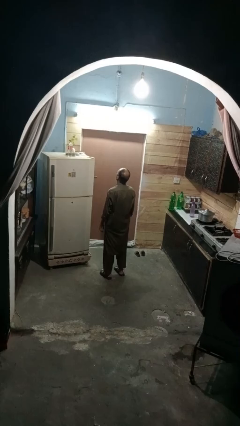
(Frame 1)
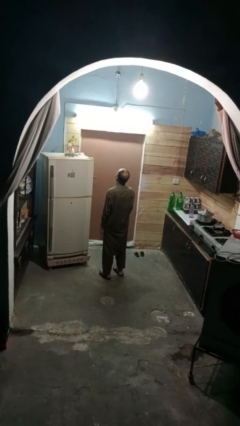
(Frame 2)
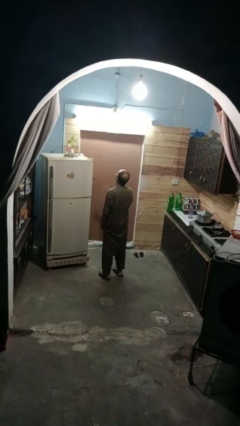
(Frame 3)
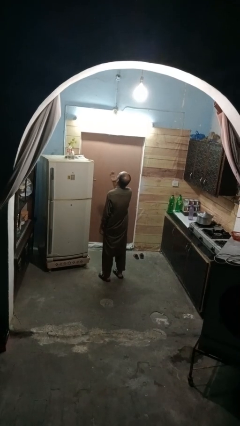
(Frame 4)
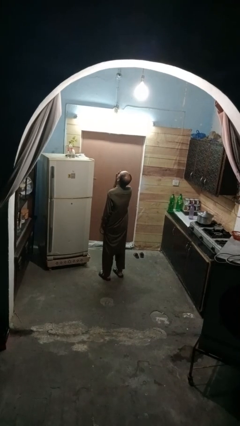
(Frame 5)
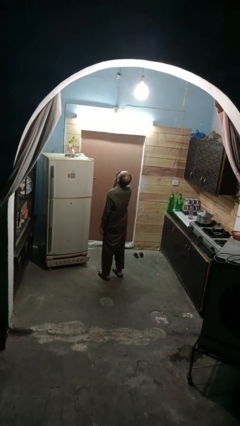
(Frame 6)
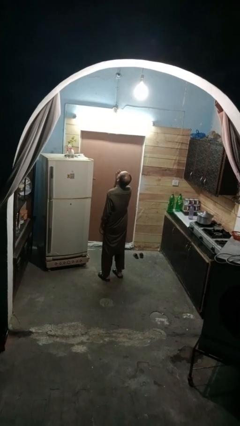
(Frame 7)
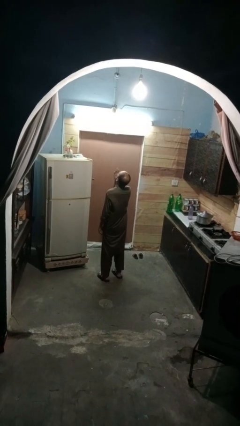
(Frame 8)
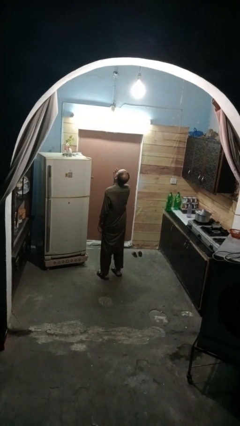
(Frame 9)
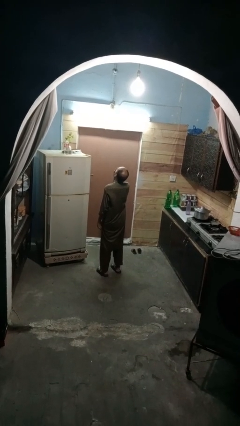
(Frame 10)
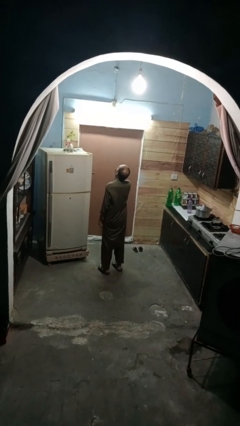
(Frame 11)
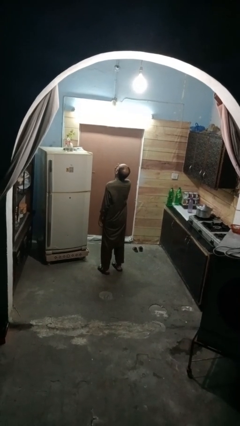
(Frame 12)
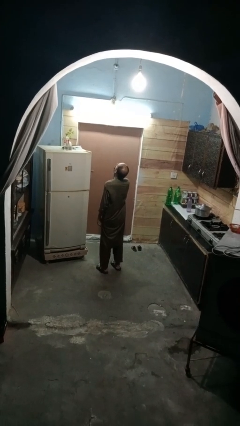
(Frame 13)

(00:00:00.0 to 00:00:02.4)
person yawns

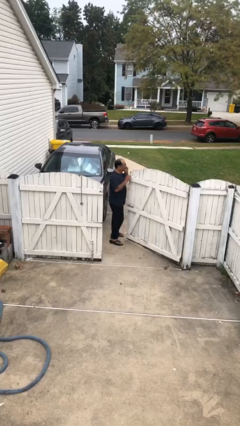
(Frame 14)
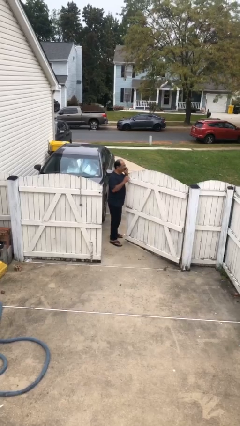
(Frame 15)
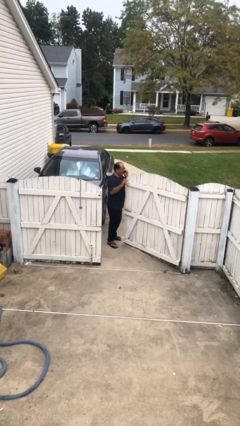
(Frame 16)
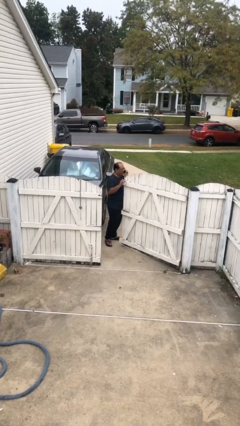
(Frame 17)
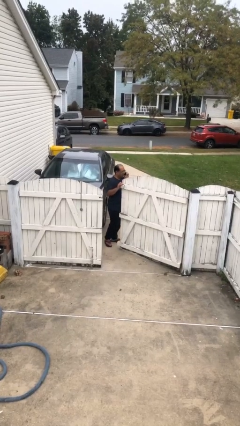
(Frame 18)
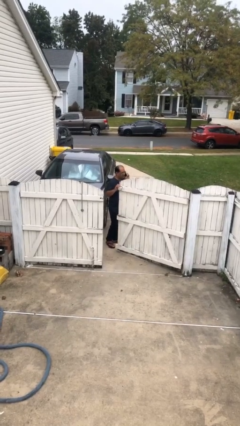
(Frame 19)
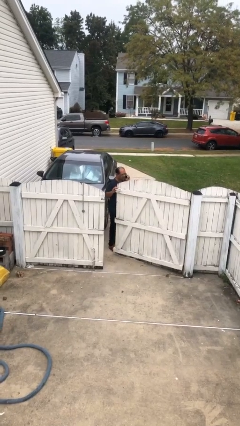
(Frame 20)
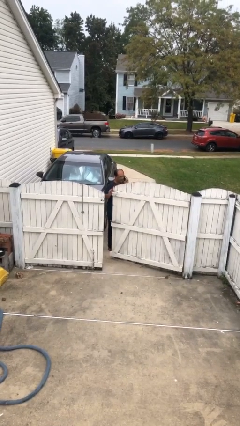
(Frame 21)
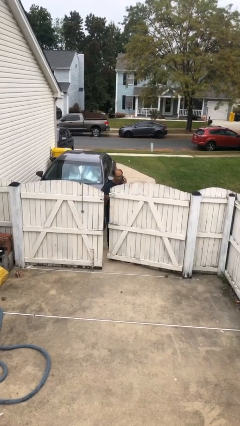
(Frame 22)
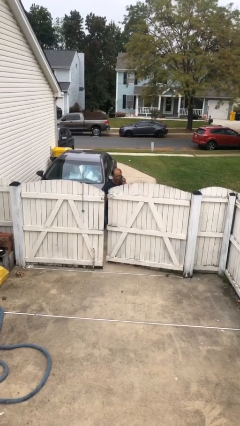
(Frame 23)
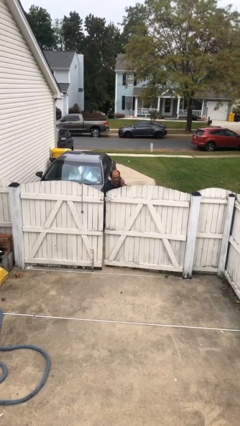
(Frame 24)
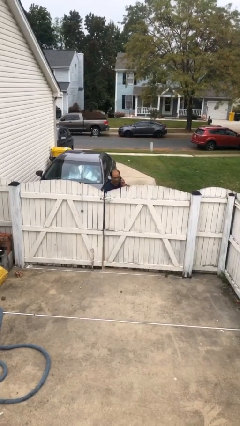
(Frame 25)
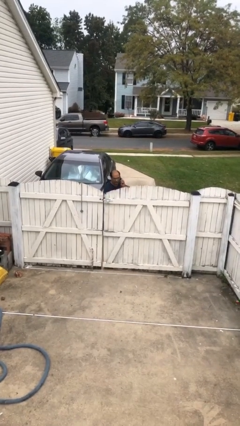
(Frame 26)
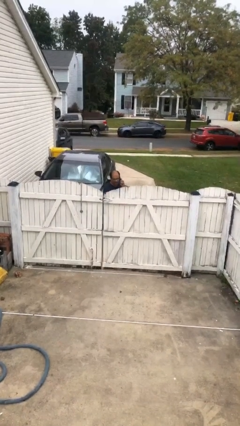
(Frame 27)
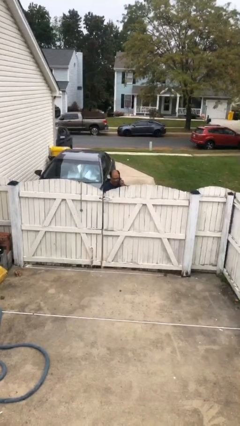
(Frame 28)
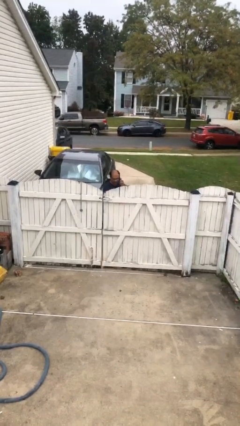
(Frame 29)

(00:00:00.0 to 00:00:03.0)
person closes facility door

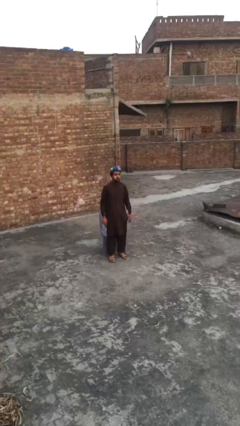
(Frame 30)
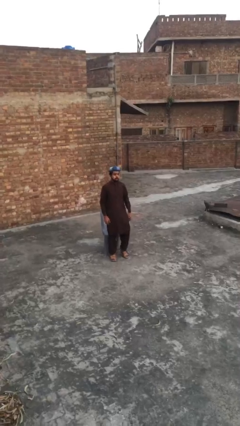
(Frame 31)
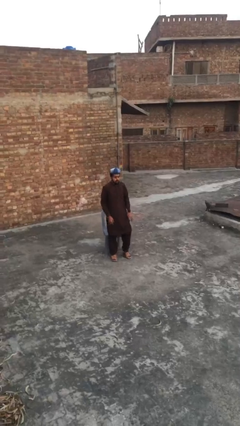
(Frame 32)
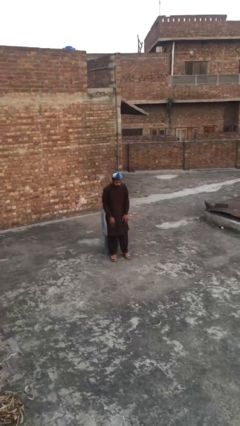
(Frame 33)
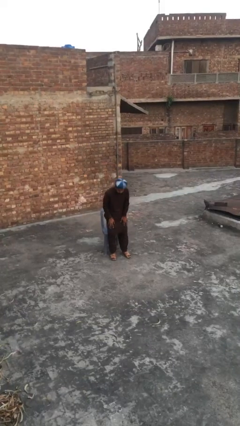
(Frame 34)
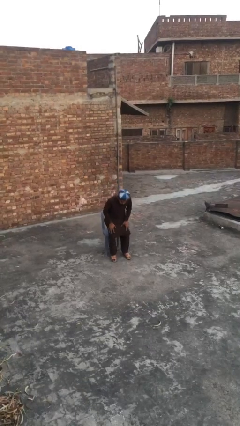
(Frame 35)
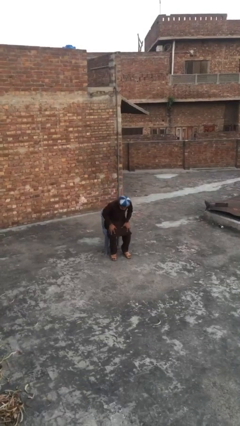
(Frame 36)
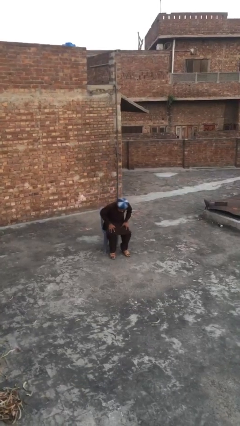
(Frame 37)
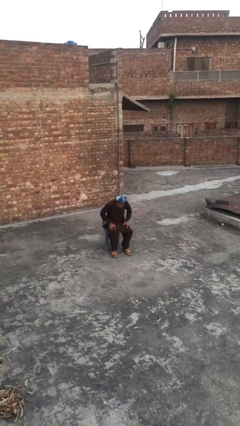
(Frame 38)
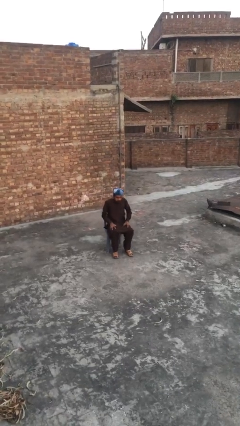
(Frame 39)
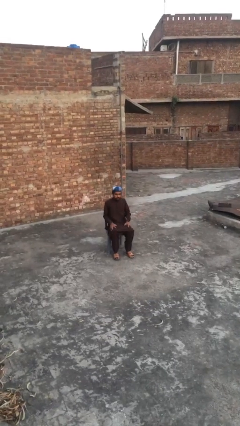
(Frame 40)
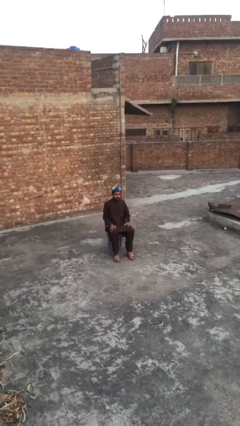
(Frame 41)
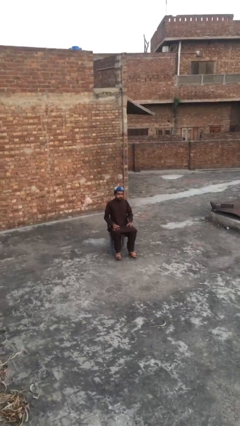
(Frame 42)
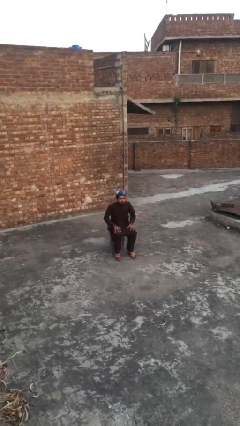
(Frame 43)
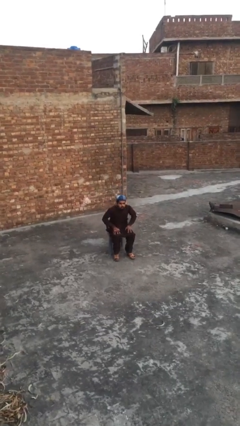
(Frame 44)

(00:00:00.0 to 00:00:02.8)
person sits down

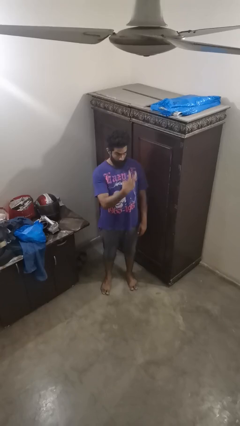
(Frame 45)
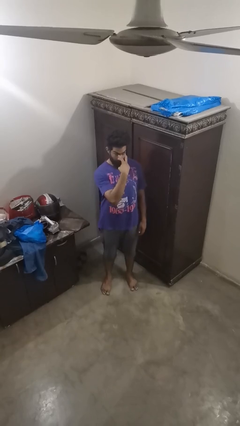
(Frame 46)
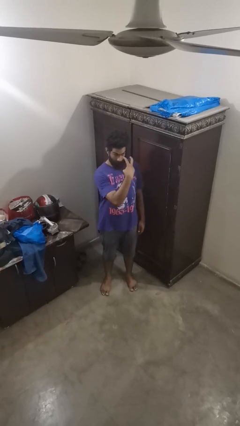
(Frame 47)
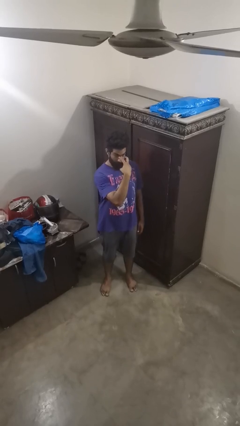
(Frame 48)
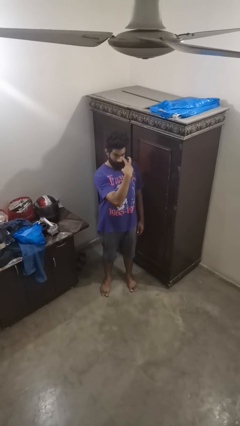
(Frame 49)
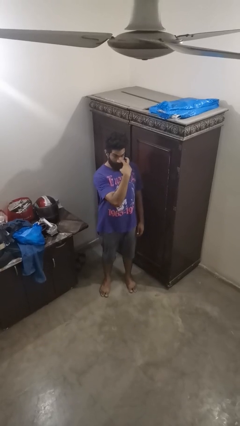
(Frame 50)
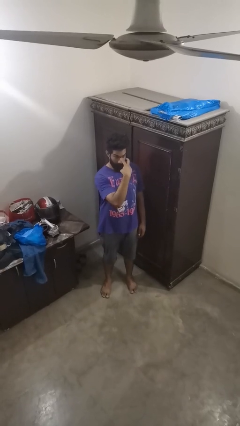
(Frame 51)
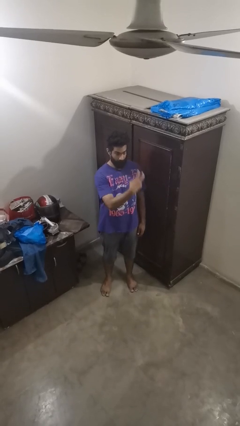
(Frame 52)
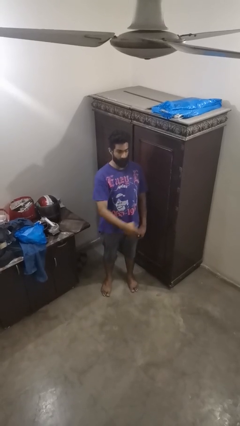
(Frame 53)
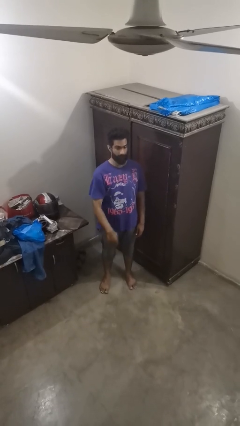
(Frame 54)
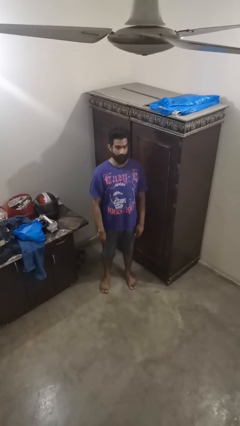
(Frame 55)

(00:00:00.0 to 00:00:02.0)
person gestures watch closely

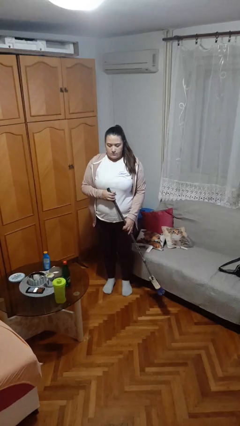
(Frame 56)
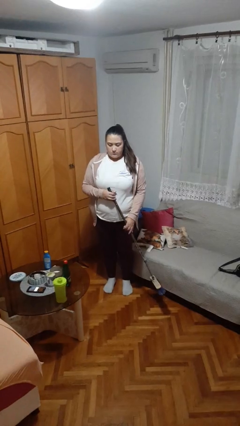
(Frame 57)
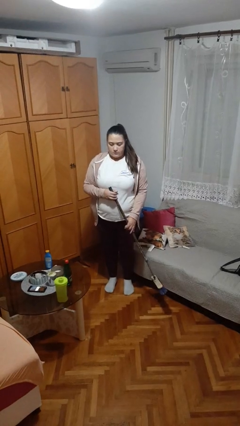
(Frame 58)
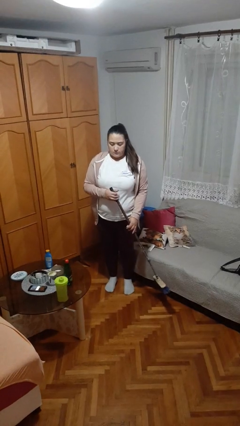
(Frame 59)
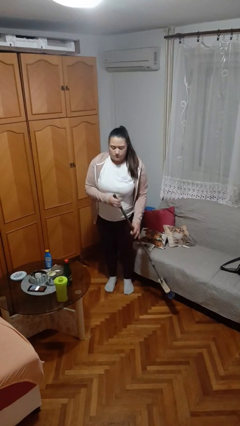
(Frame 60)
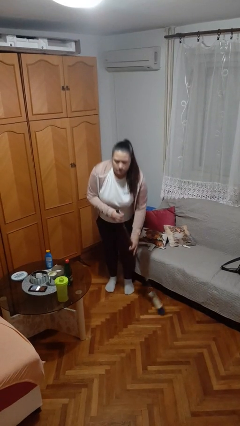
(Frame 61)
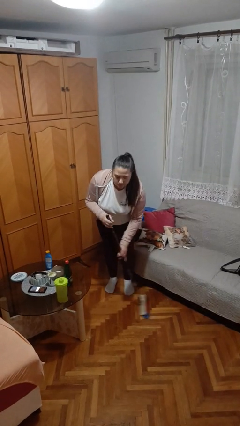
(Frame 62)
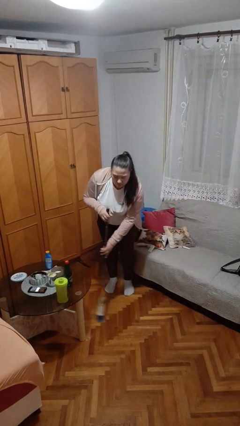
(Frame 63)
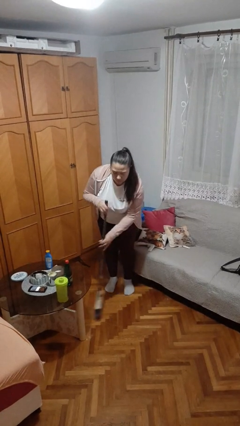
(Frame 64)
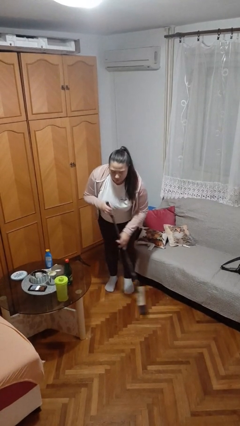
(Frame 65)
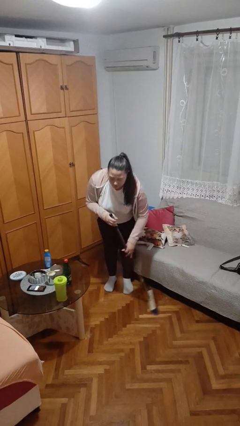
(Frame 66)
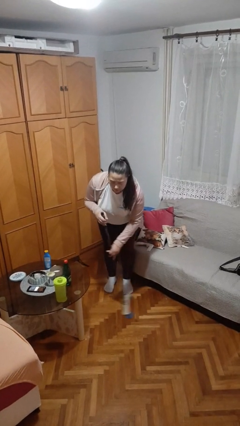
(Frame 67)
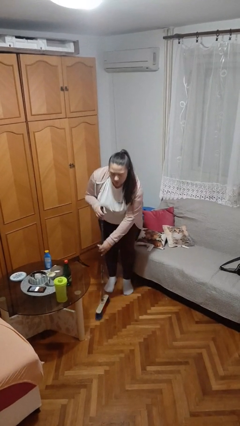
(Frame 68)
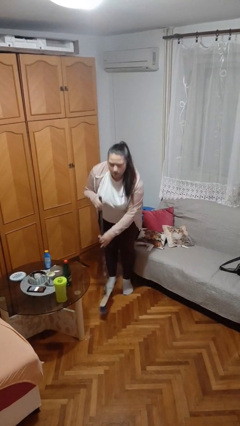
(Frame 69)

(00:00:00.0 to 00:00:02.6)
person sweeps floor

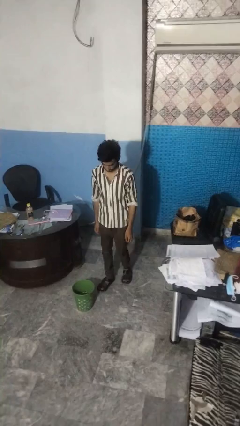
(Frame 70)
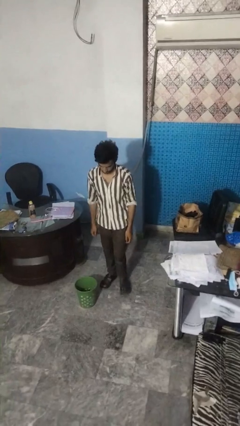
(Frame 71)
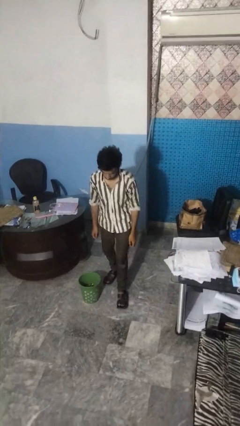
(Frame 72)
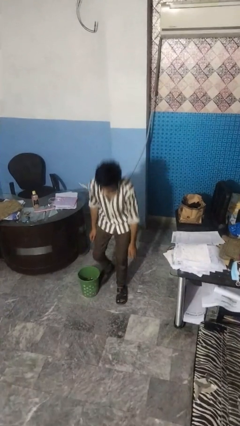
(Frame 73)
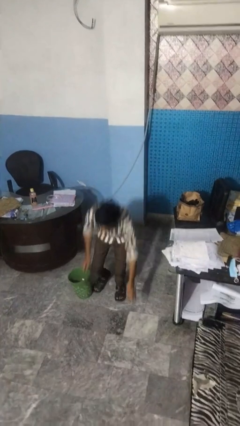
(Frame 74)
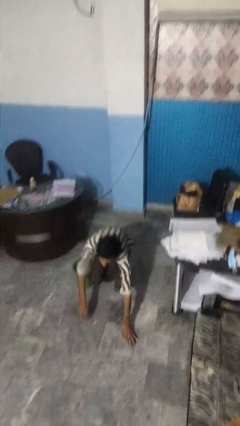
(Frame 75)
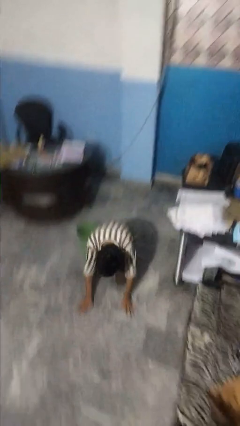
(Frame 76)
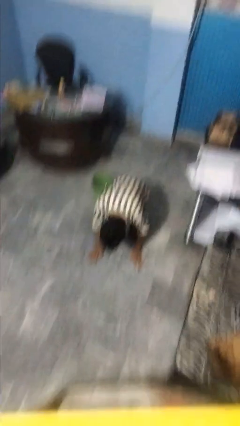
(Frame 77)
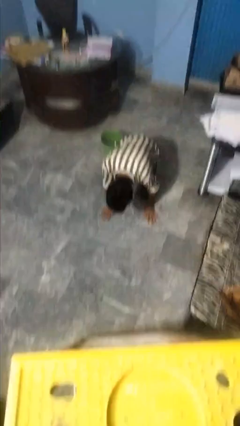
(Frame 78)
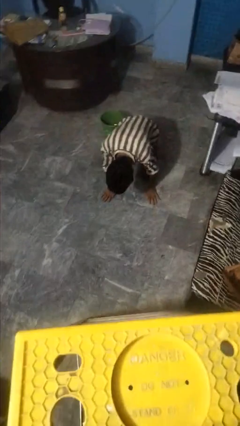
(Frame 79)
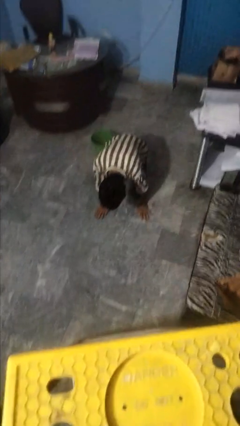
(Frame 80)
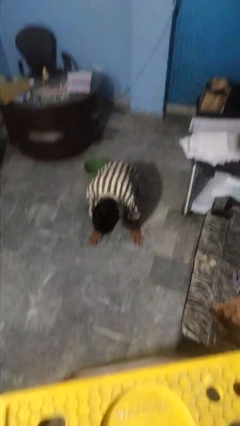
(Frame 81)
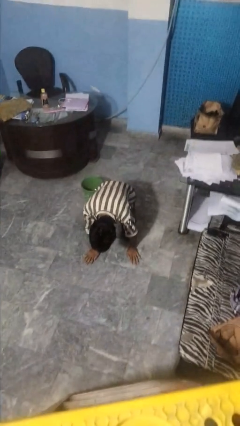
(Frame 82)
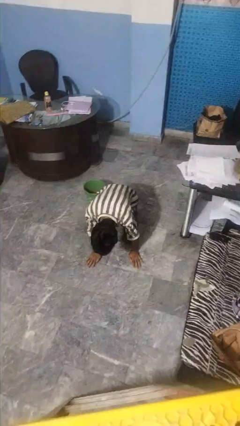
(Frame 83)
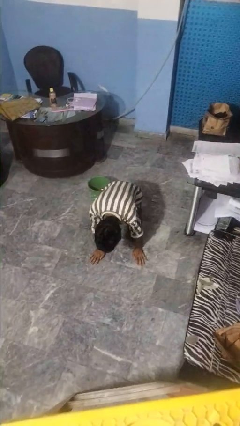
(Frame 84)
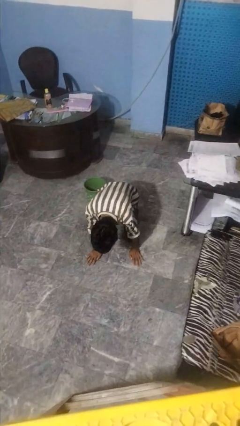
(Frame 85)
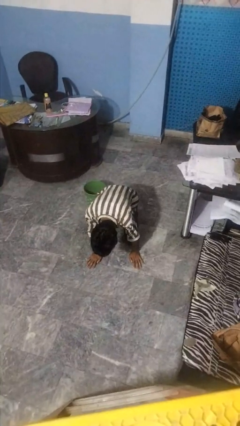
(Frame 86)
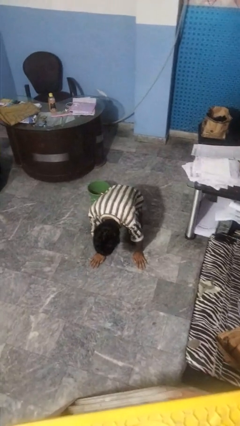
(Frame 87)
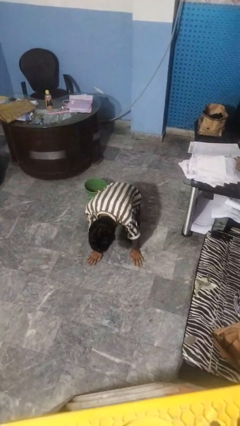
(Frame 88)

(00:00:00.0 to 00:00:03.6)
person trips on object on floor

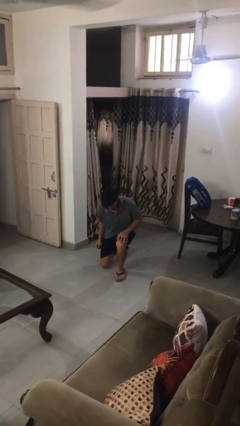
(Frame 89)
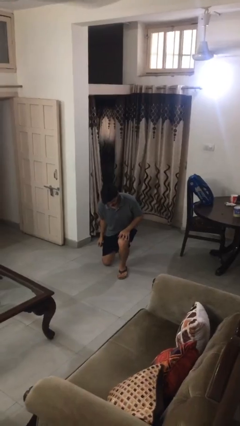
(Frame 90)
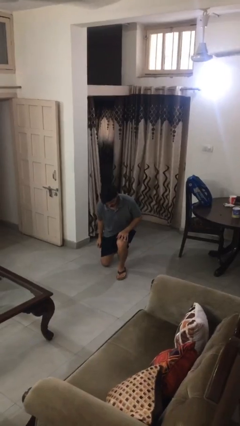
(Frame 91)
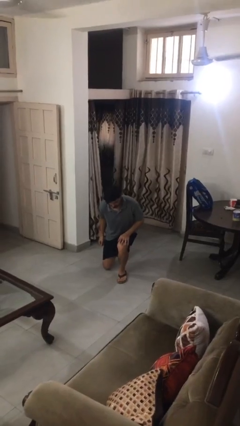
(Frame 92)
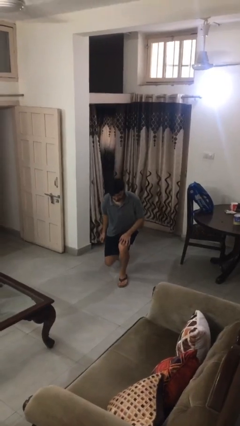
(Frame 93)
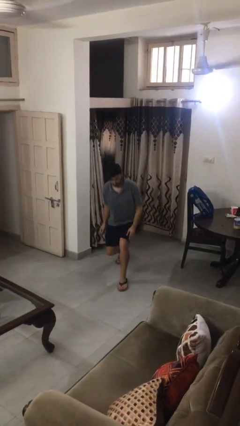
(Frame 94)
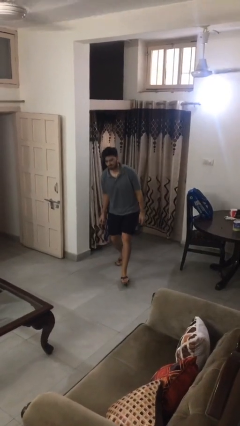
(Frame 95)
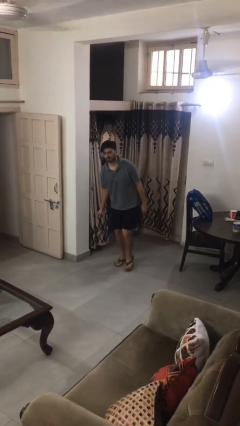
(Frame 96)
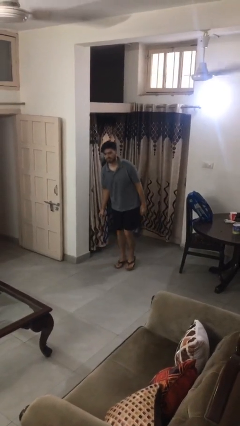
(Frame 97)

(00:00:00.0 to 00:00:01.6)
person stands up from floor
